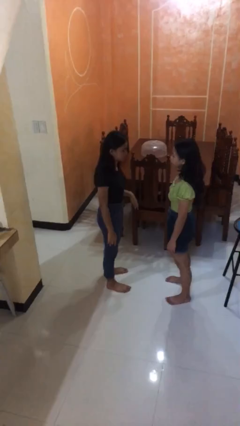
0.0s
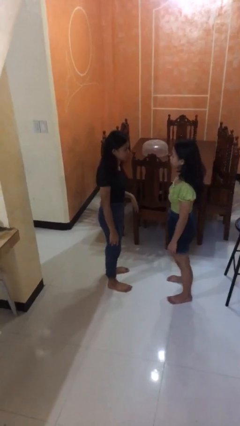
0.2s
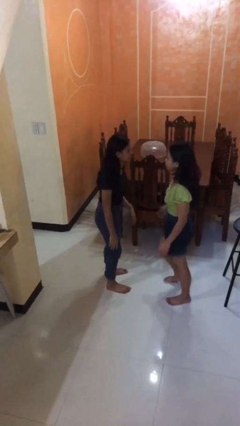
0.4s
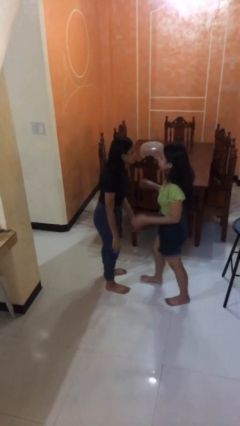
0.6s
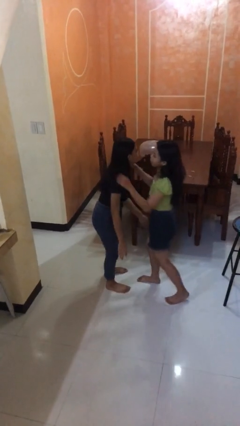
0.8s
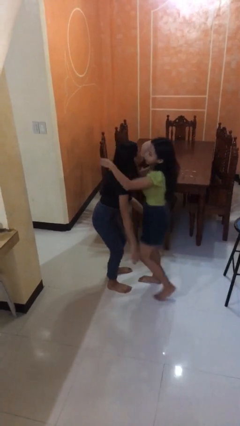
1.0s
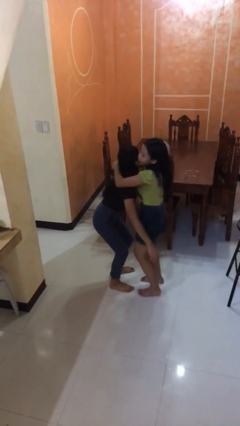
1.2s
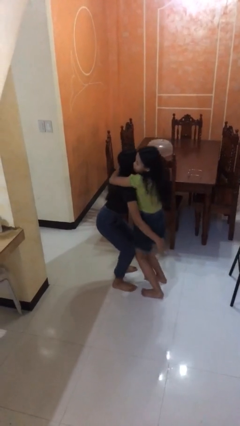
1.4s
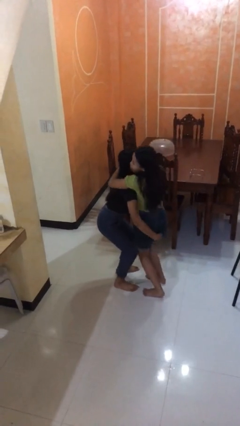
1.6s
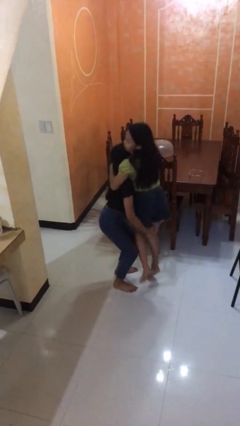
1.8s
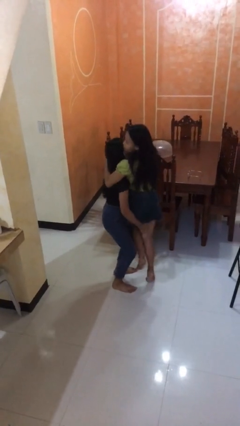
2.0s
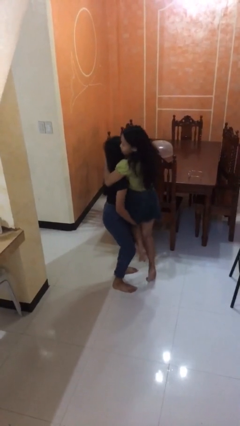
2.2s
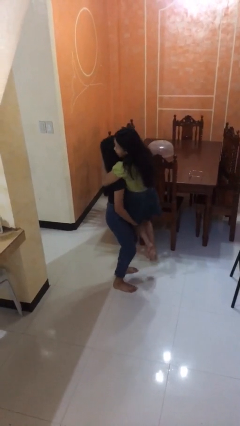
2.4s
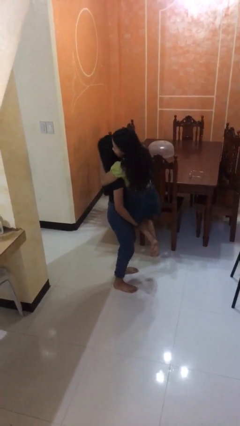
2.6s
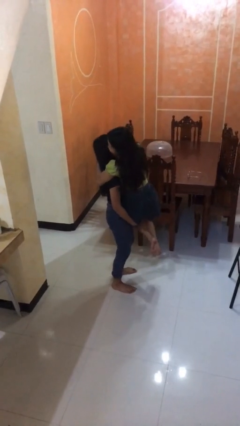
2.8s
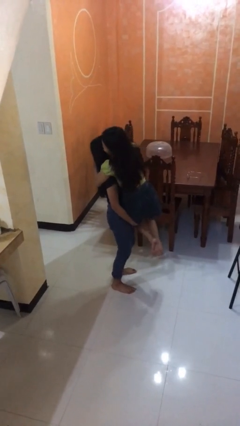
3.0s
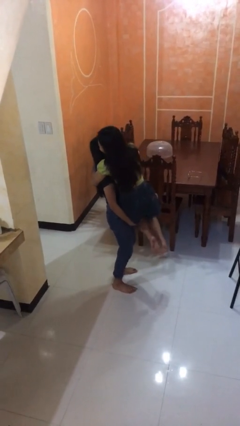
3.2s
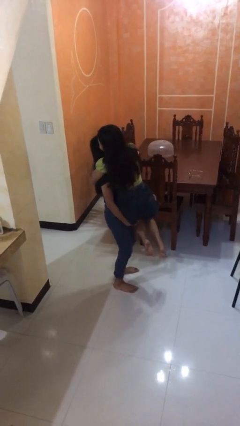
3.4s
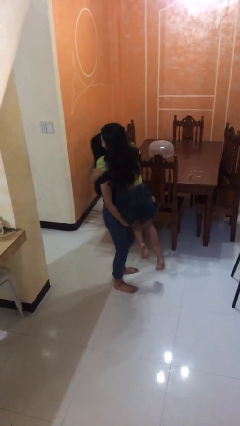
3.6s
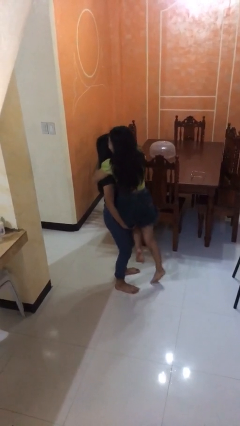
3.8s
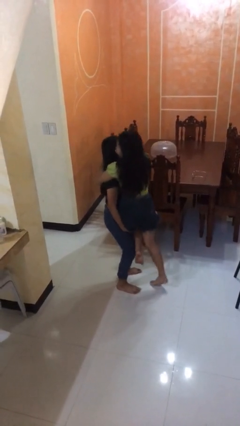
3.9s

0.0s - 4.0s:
person picks up person

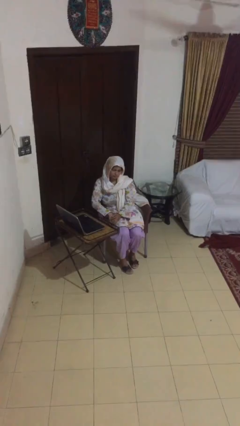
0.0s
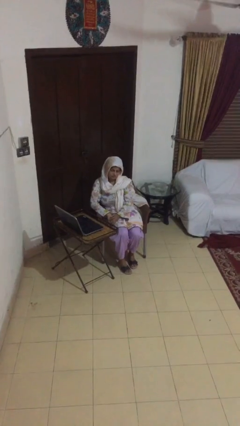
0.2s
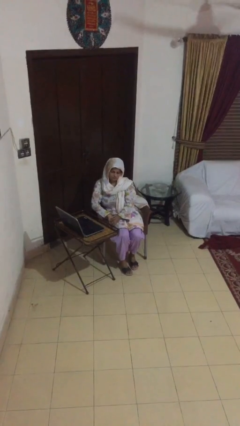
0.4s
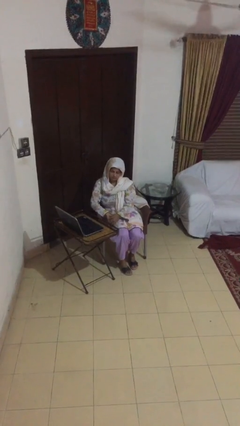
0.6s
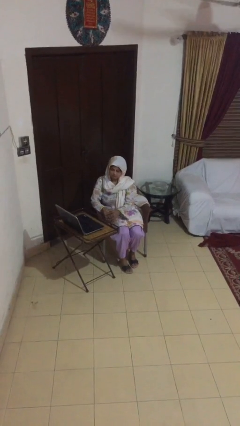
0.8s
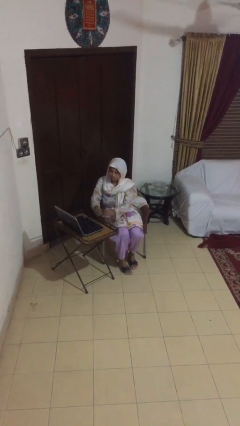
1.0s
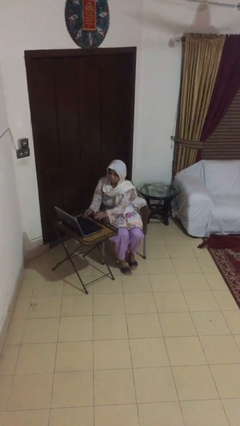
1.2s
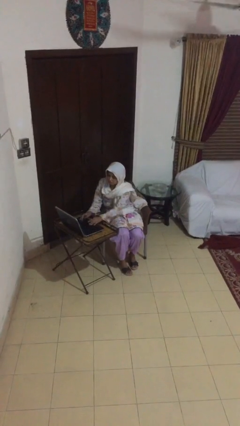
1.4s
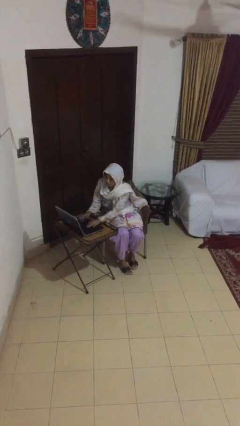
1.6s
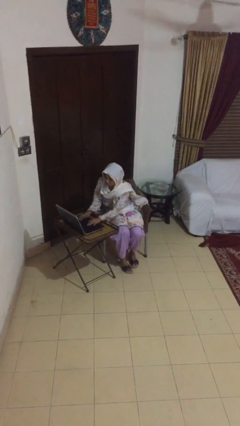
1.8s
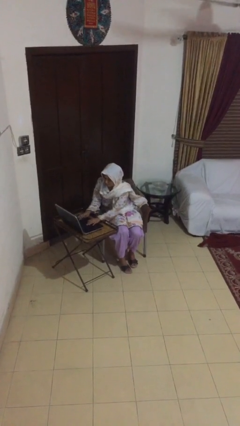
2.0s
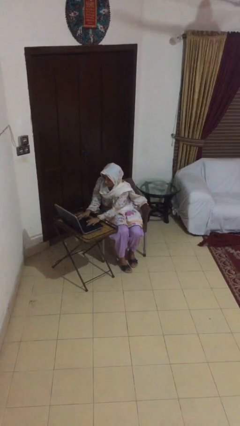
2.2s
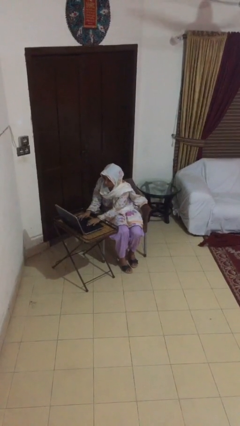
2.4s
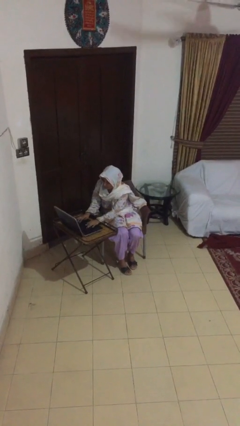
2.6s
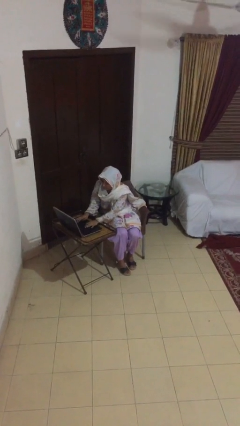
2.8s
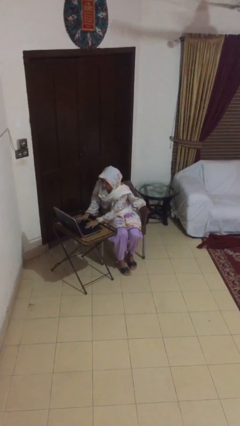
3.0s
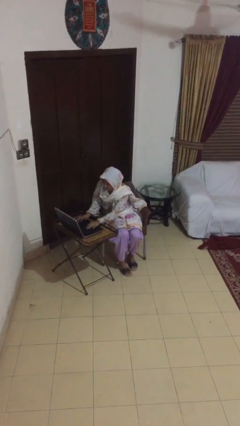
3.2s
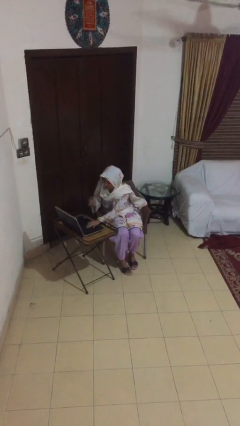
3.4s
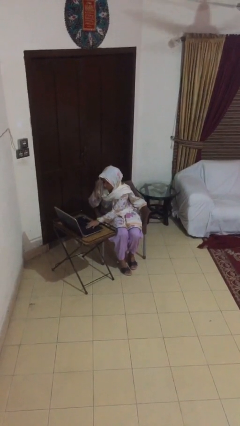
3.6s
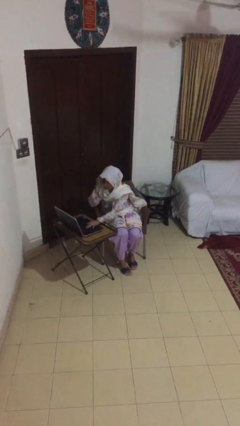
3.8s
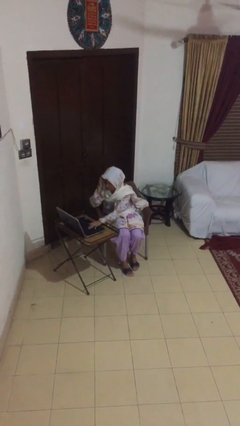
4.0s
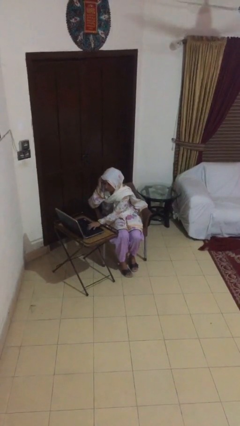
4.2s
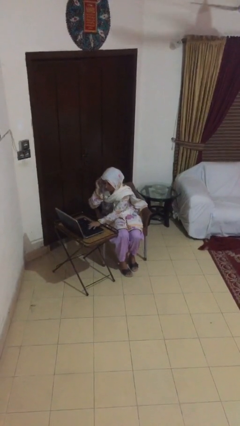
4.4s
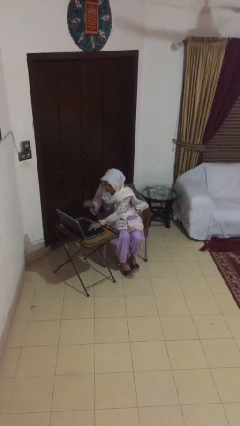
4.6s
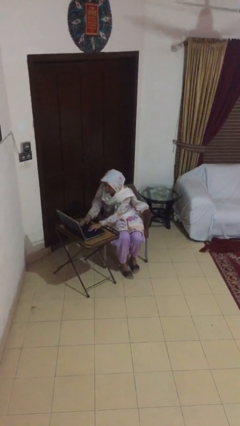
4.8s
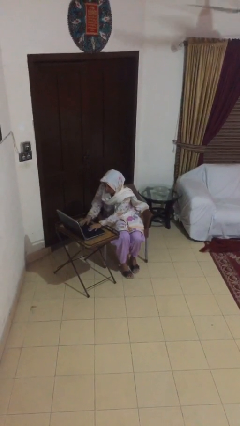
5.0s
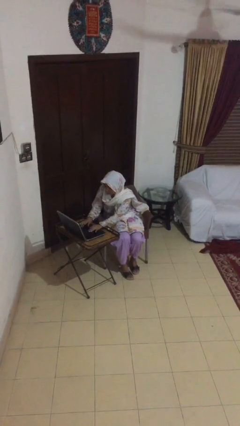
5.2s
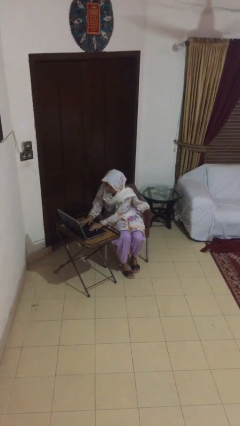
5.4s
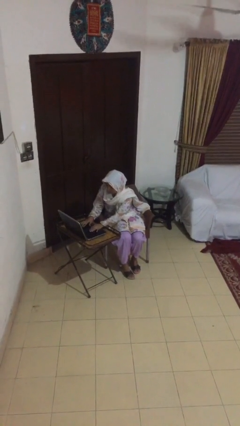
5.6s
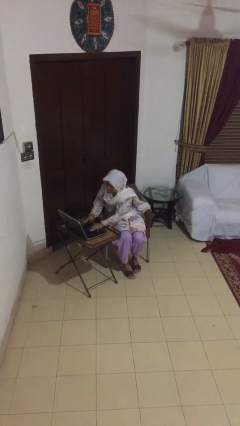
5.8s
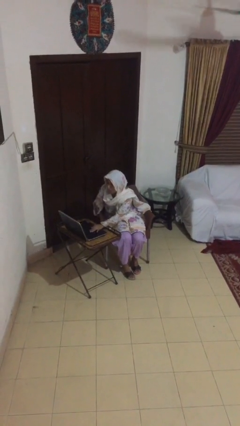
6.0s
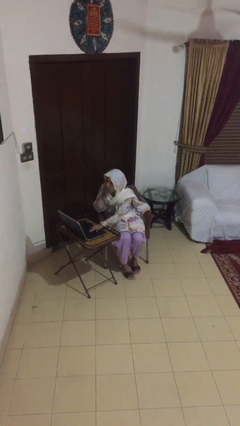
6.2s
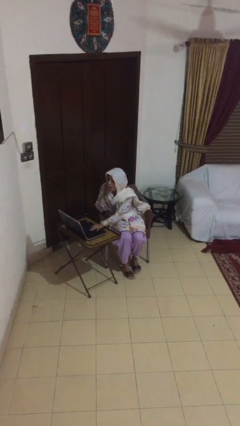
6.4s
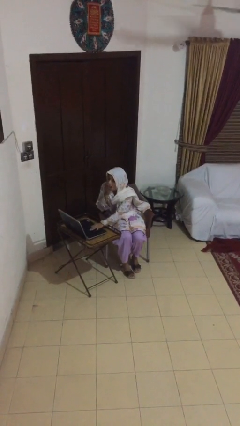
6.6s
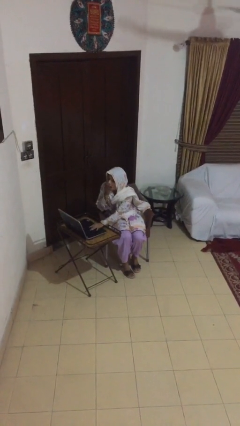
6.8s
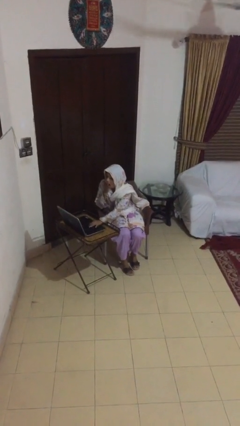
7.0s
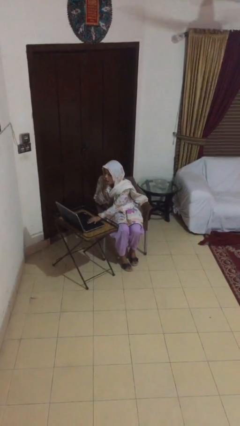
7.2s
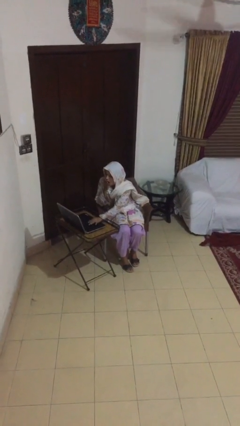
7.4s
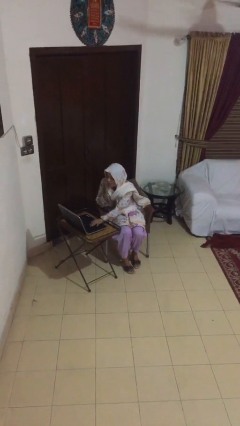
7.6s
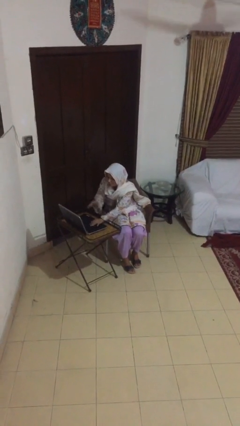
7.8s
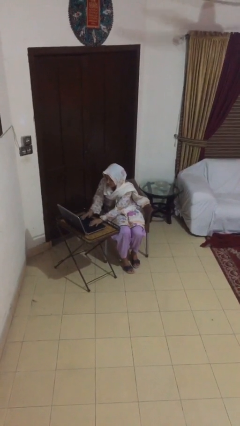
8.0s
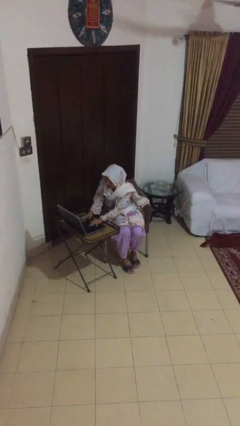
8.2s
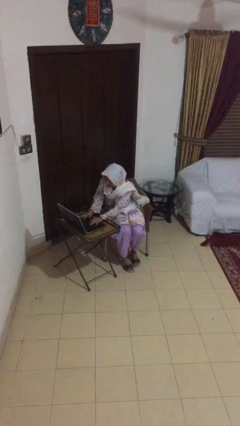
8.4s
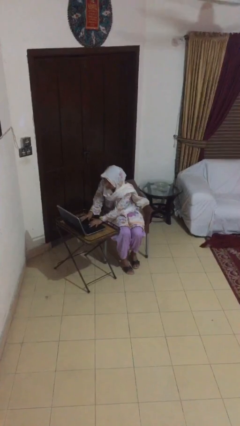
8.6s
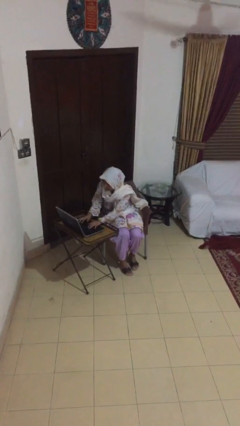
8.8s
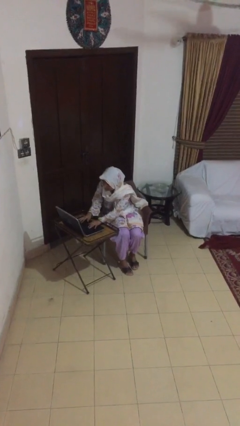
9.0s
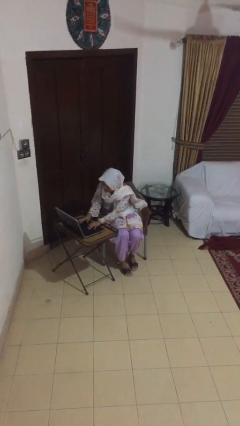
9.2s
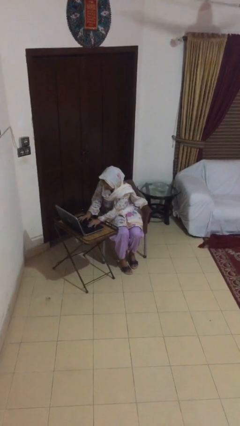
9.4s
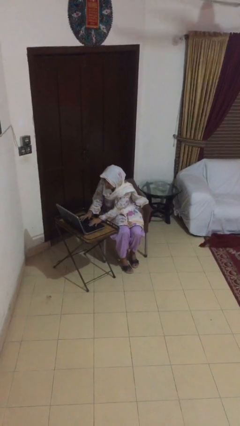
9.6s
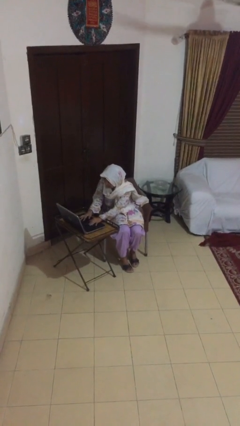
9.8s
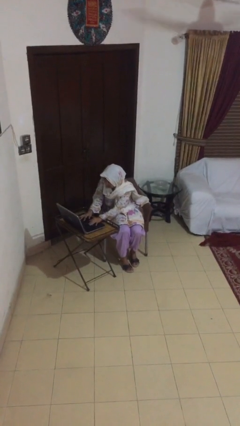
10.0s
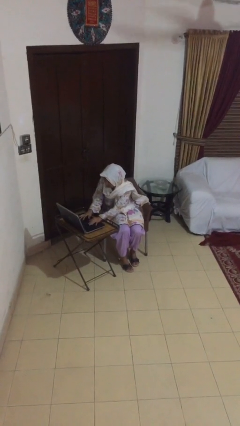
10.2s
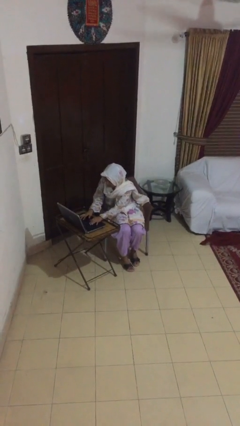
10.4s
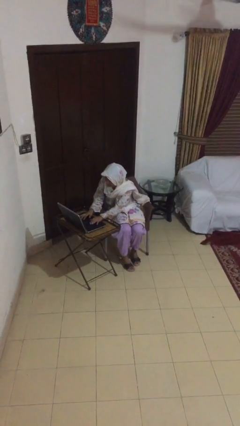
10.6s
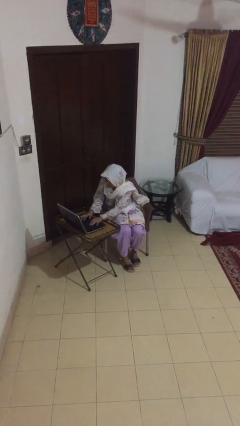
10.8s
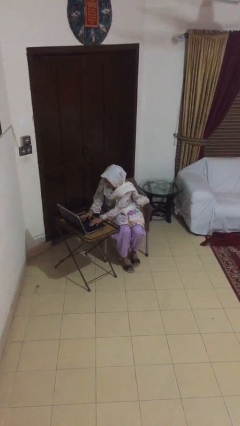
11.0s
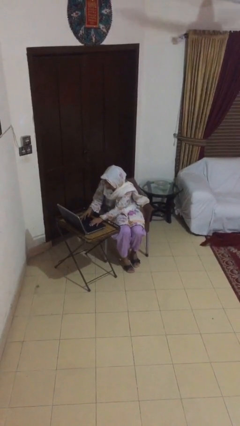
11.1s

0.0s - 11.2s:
person interacts with laptop

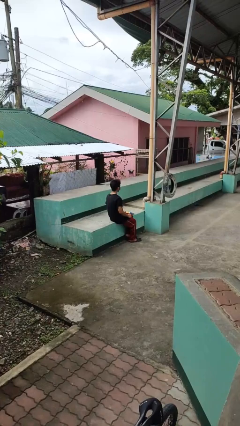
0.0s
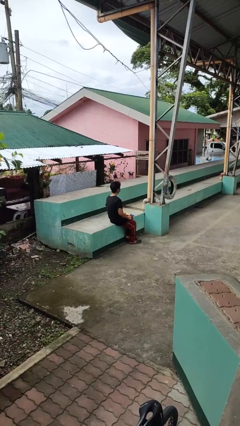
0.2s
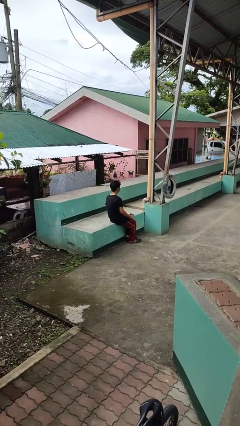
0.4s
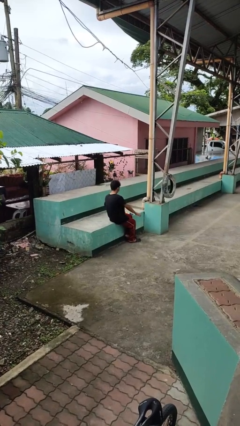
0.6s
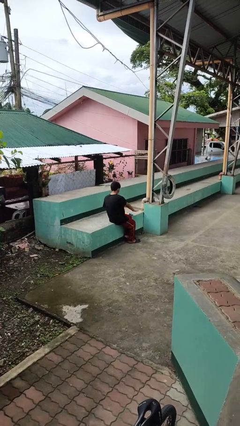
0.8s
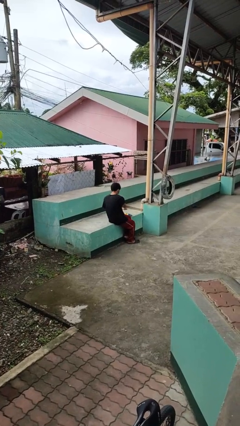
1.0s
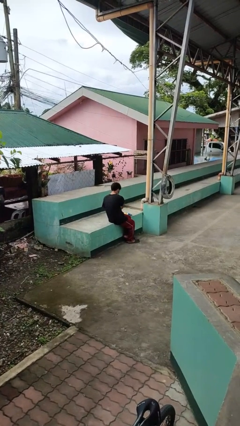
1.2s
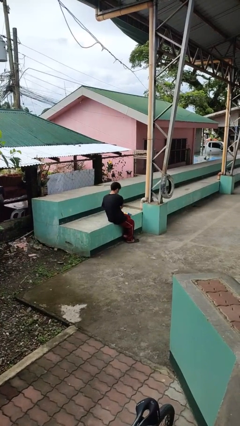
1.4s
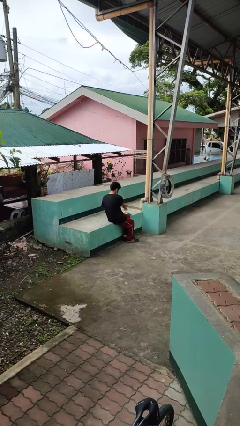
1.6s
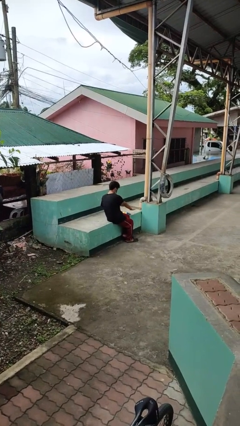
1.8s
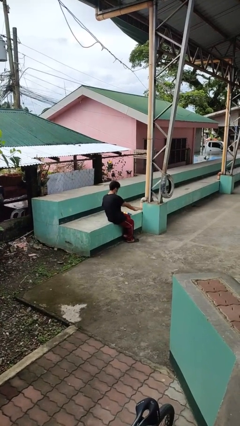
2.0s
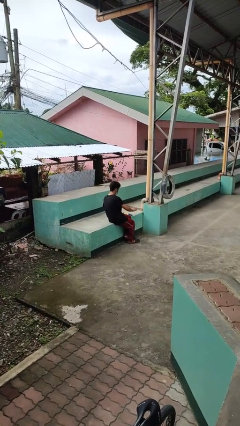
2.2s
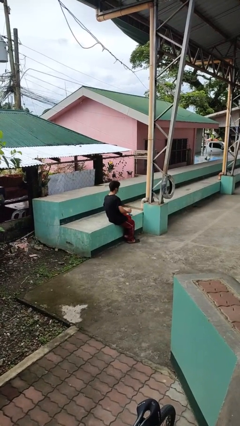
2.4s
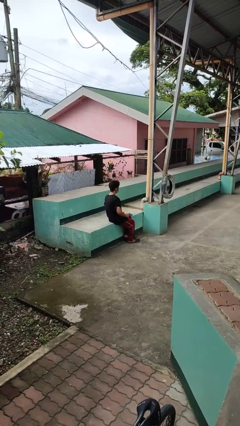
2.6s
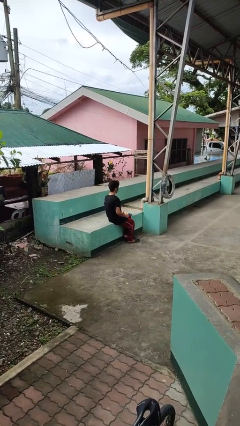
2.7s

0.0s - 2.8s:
person waves hand over object
